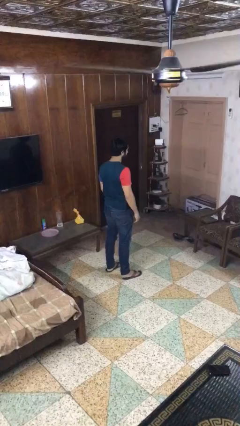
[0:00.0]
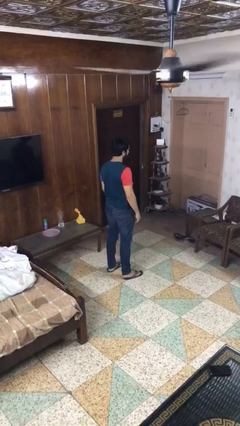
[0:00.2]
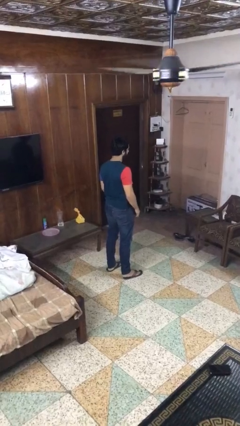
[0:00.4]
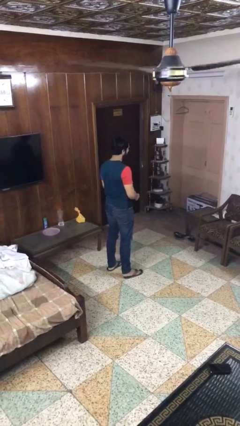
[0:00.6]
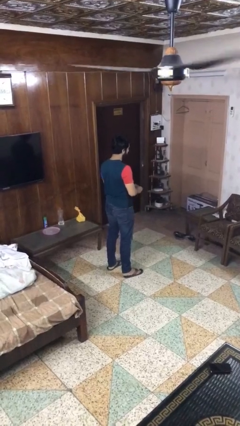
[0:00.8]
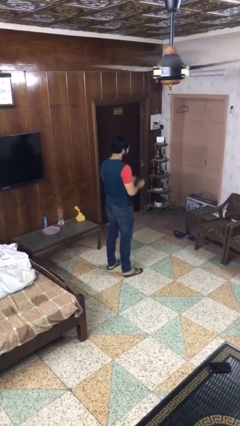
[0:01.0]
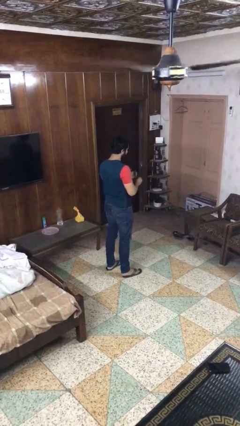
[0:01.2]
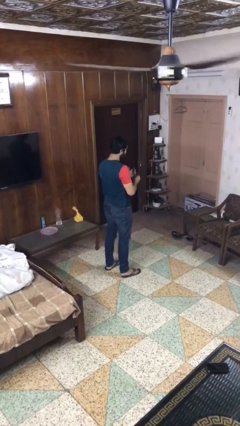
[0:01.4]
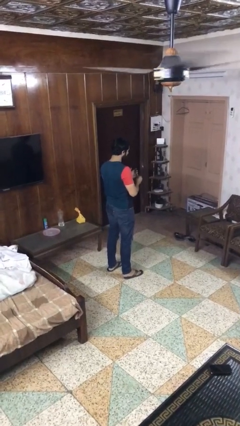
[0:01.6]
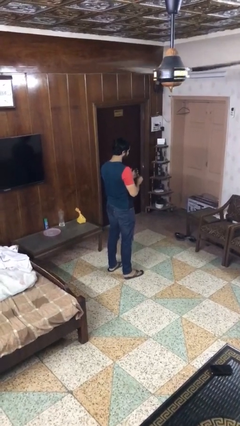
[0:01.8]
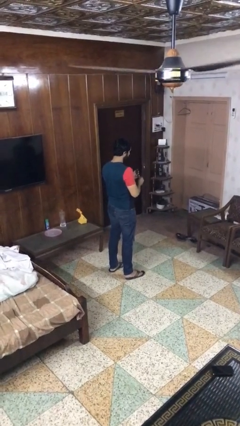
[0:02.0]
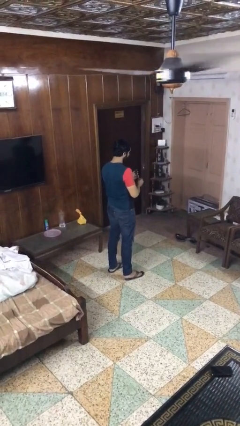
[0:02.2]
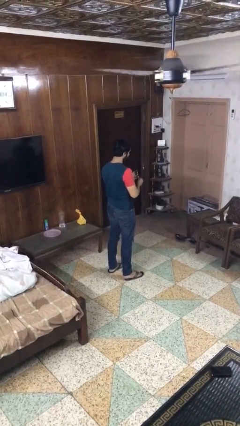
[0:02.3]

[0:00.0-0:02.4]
person files fingernails

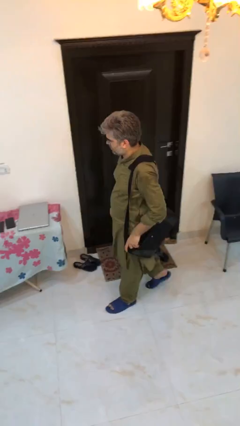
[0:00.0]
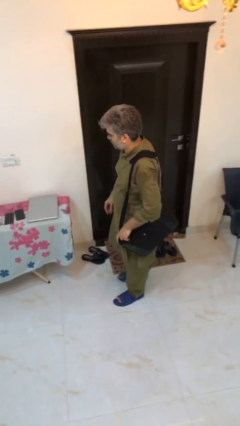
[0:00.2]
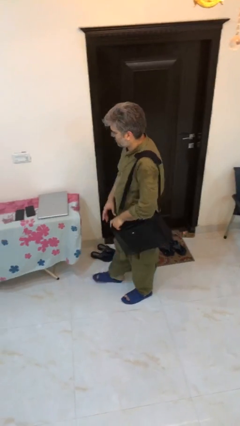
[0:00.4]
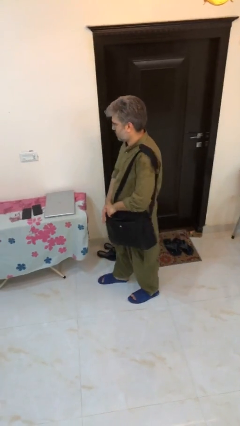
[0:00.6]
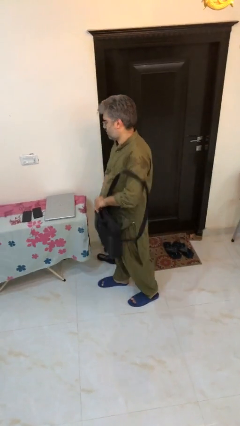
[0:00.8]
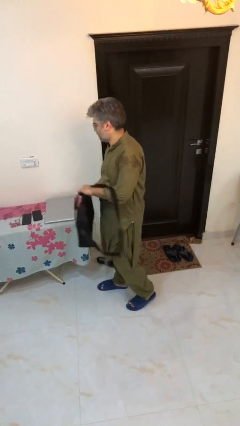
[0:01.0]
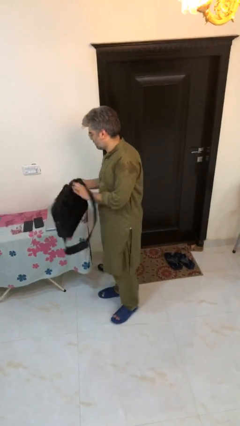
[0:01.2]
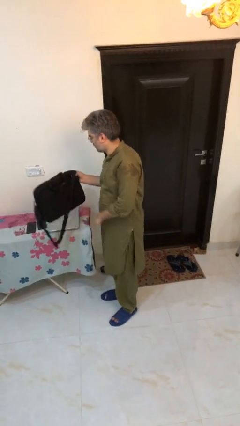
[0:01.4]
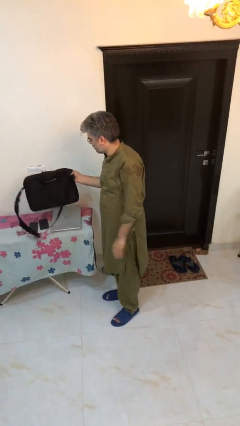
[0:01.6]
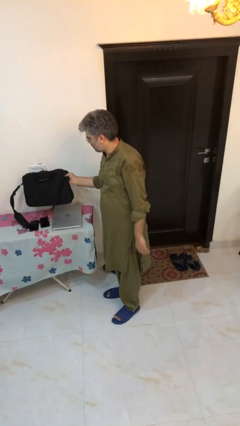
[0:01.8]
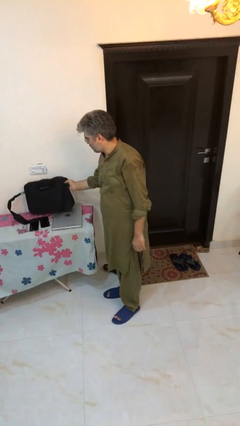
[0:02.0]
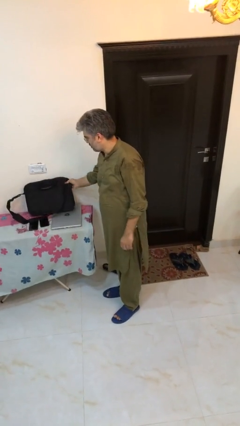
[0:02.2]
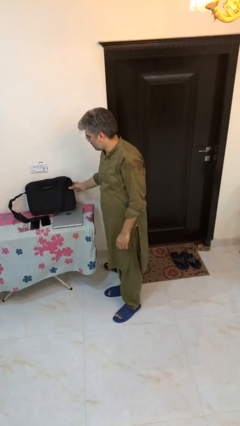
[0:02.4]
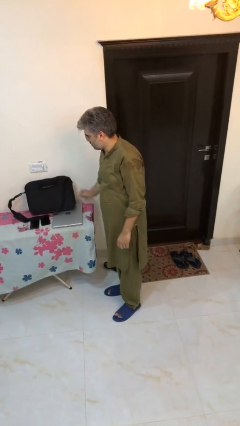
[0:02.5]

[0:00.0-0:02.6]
person puts down object on table

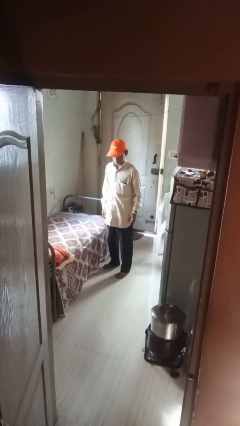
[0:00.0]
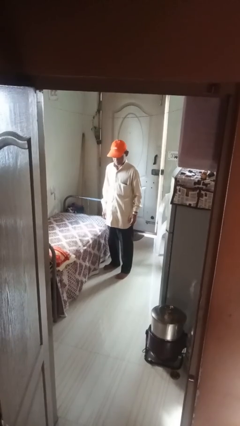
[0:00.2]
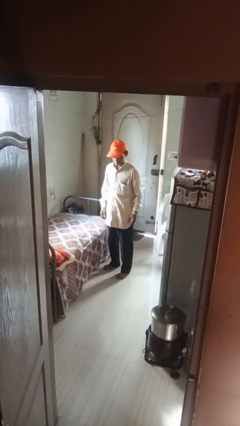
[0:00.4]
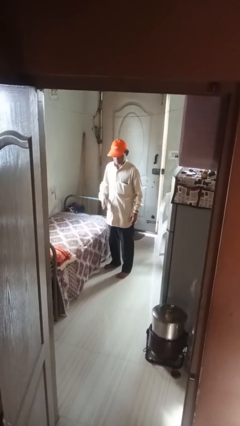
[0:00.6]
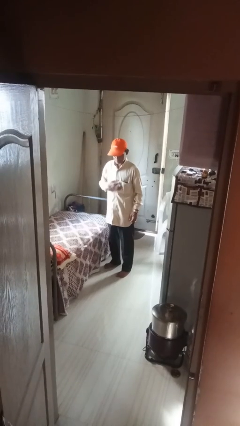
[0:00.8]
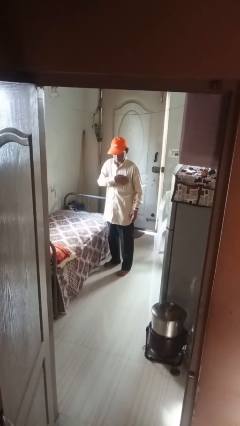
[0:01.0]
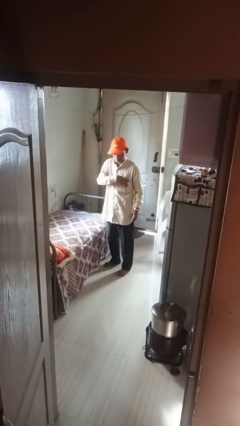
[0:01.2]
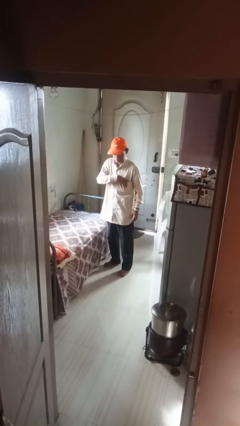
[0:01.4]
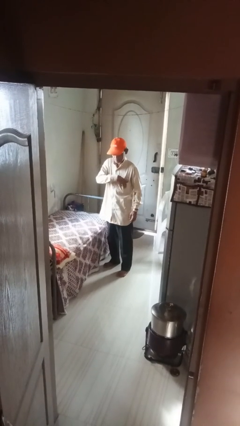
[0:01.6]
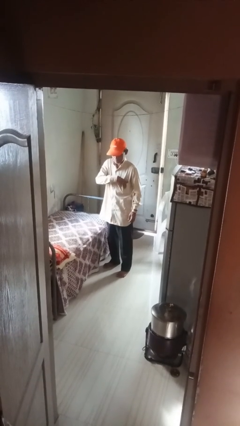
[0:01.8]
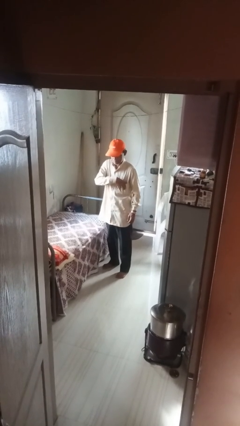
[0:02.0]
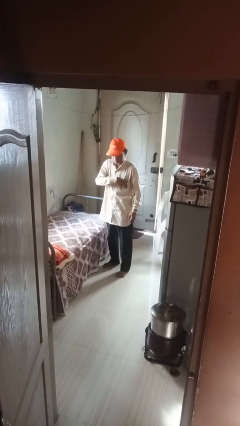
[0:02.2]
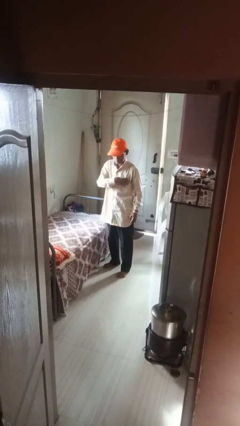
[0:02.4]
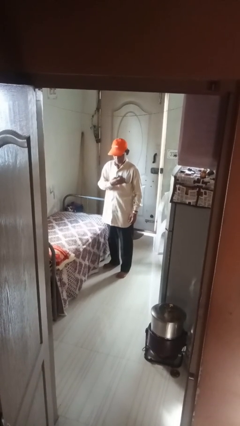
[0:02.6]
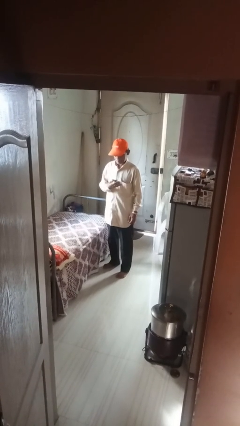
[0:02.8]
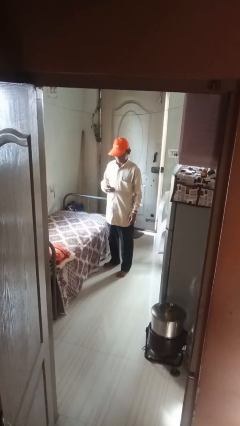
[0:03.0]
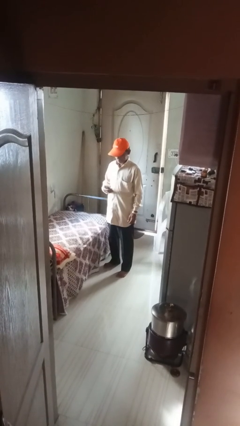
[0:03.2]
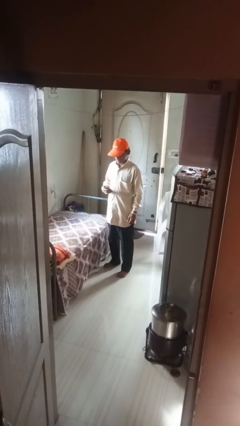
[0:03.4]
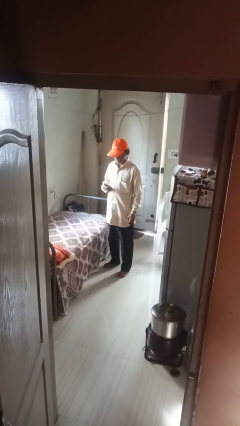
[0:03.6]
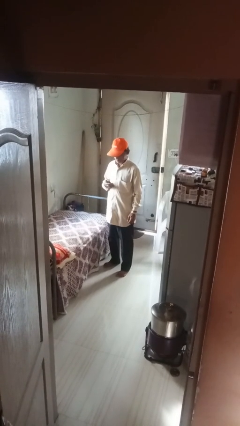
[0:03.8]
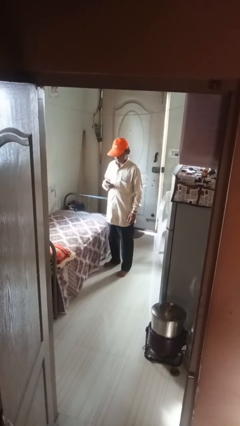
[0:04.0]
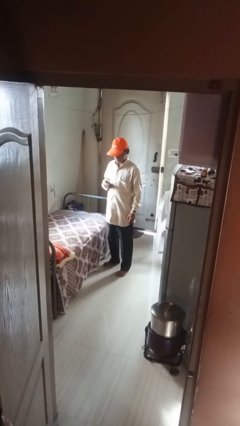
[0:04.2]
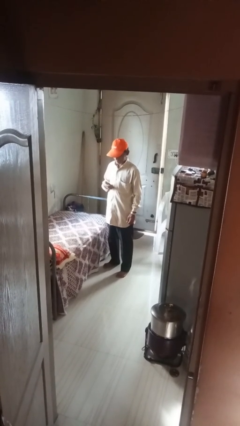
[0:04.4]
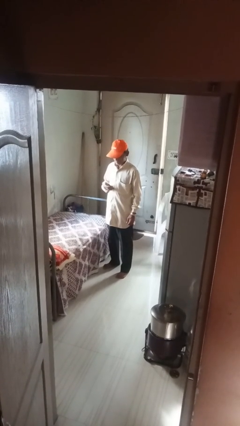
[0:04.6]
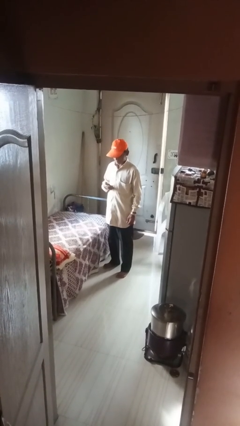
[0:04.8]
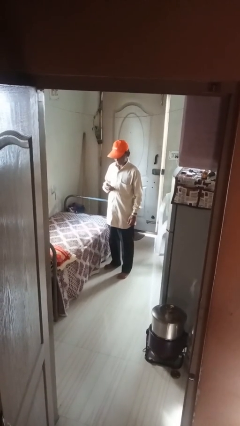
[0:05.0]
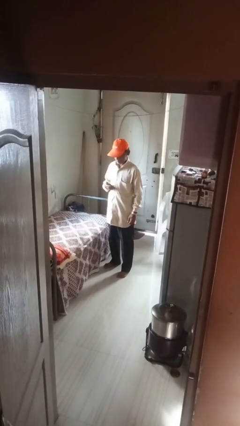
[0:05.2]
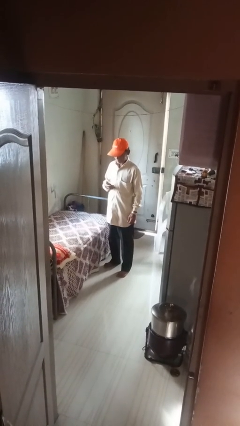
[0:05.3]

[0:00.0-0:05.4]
person takes phone from pocket

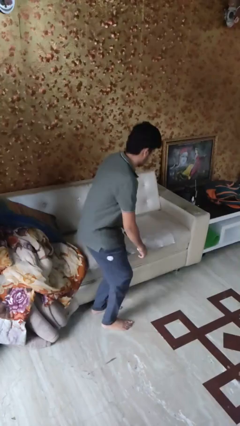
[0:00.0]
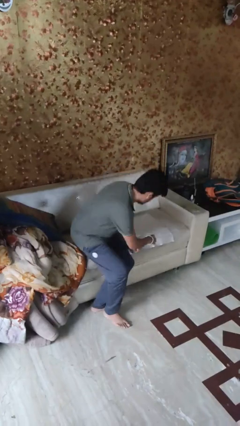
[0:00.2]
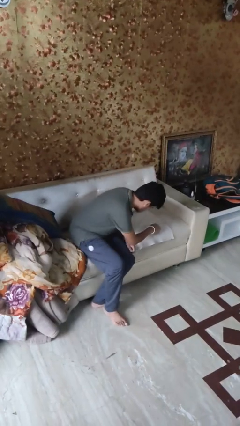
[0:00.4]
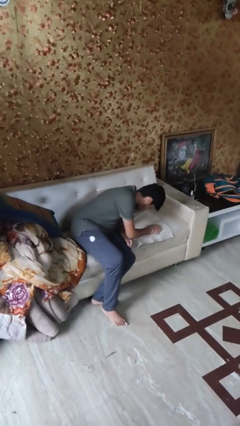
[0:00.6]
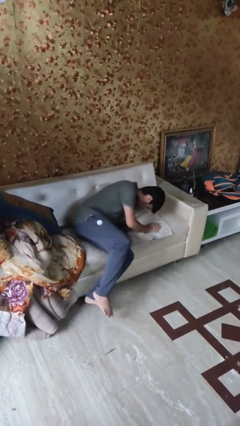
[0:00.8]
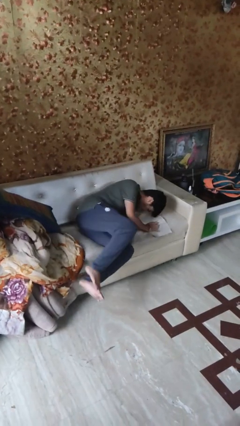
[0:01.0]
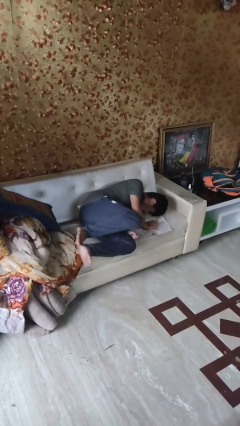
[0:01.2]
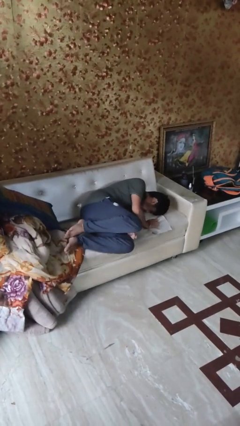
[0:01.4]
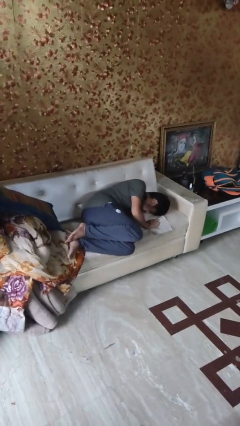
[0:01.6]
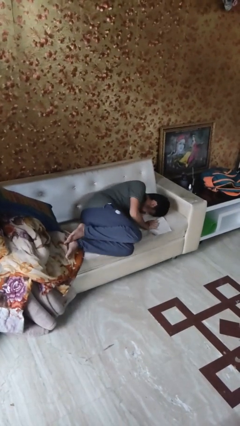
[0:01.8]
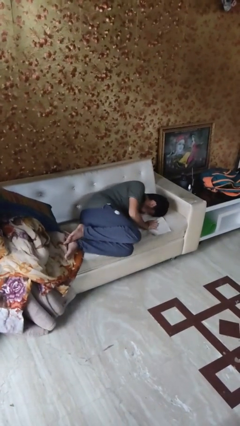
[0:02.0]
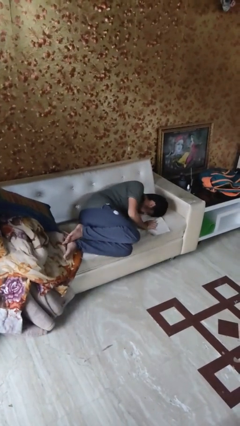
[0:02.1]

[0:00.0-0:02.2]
person lies down on couch

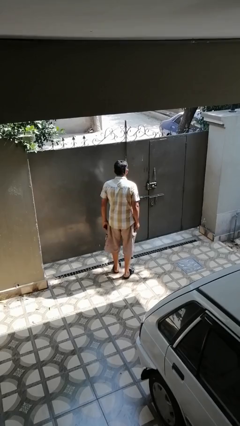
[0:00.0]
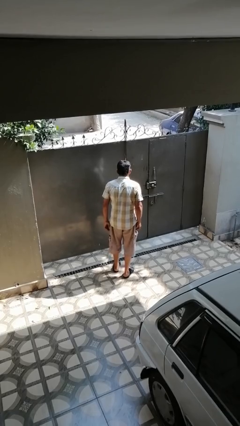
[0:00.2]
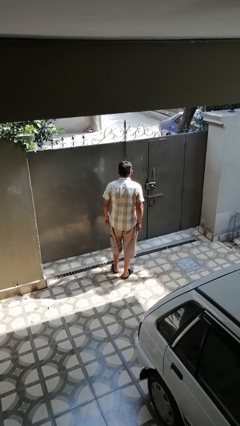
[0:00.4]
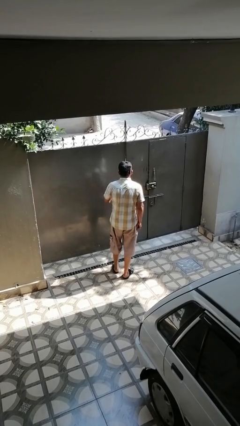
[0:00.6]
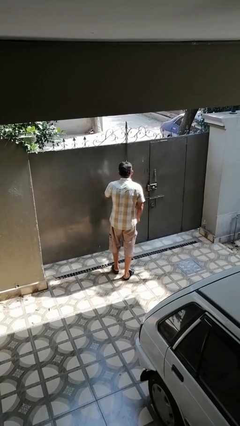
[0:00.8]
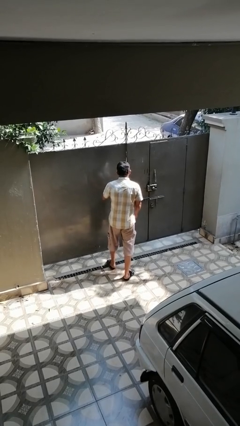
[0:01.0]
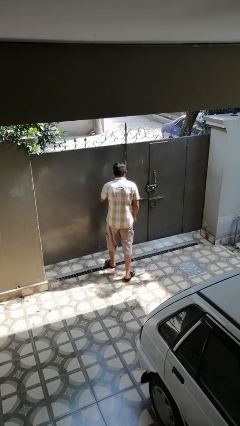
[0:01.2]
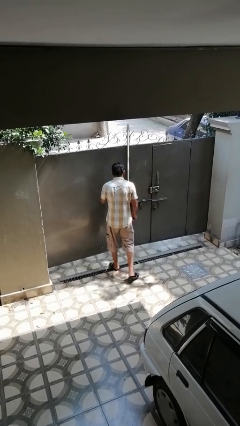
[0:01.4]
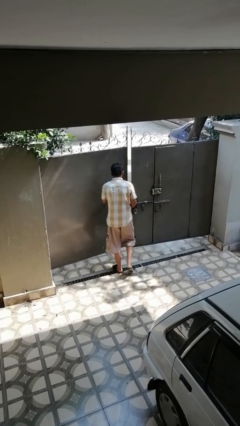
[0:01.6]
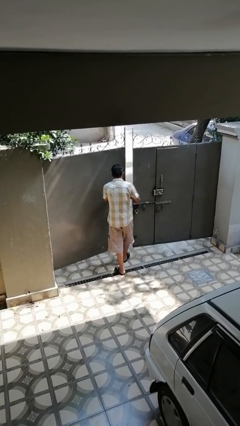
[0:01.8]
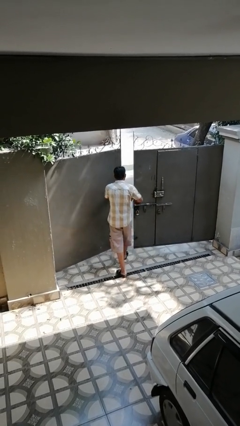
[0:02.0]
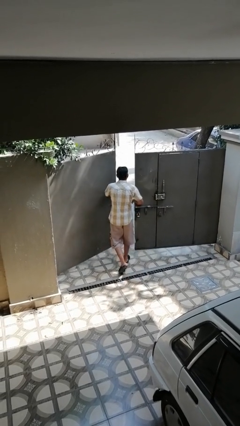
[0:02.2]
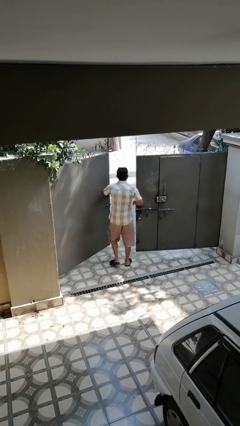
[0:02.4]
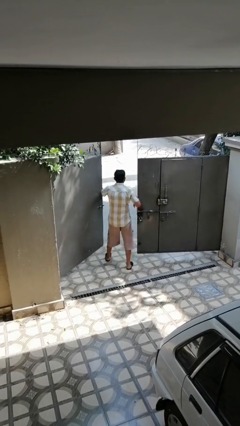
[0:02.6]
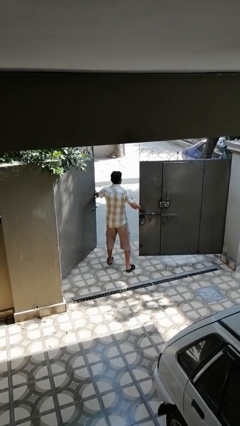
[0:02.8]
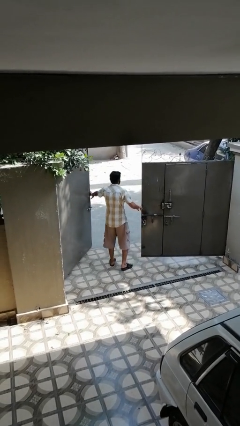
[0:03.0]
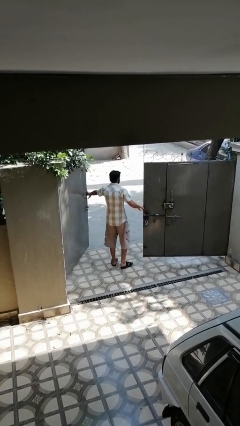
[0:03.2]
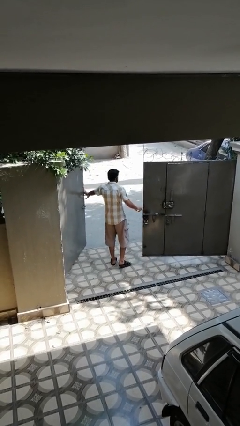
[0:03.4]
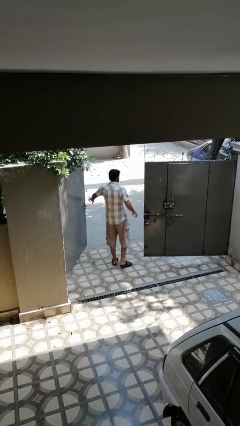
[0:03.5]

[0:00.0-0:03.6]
person opens gate

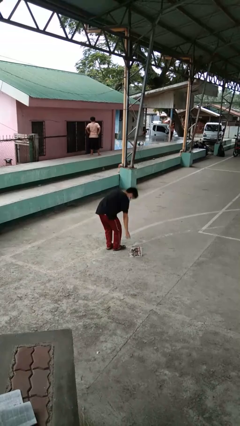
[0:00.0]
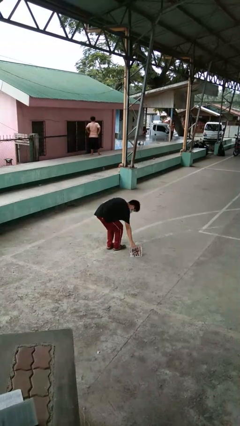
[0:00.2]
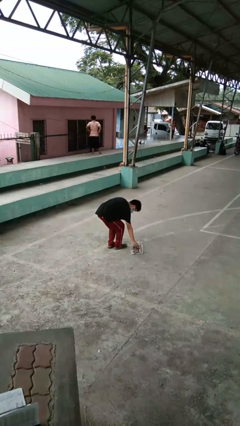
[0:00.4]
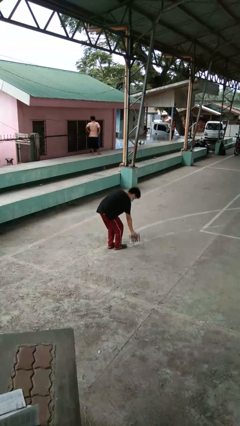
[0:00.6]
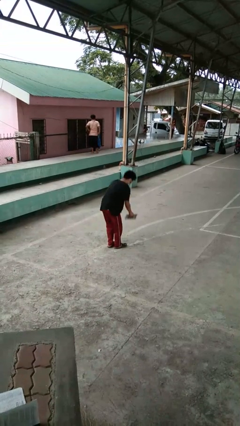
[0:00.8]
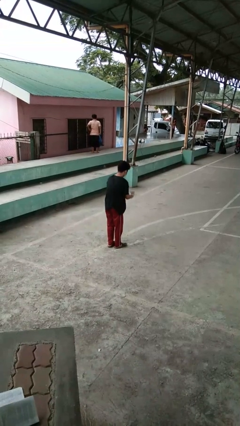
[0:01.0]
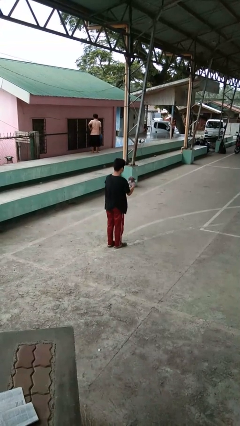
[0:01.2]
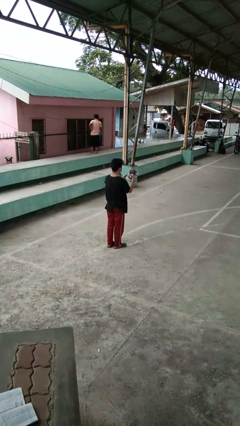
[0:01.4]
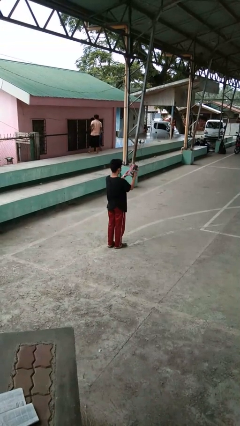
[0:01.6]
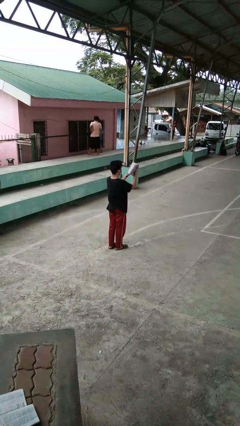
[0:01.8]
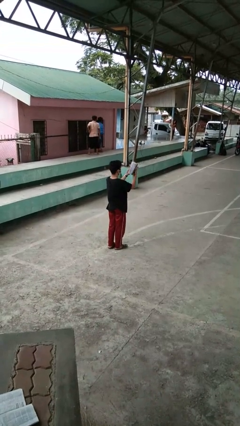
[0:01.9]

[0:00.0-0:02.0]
person picks up object from floor
